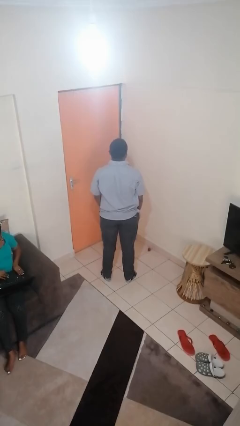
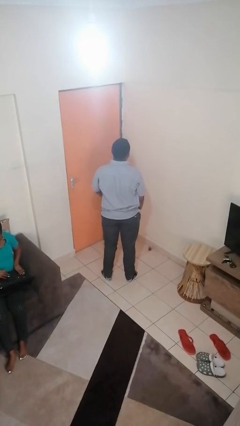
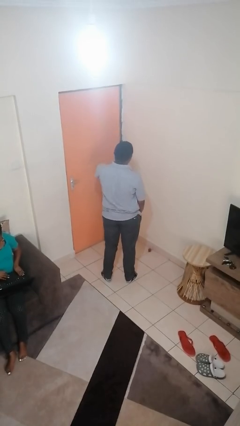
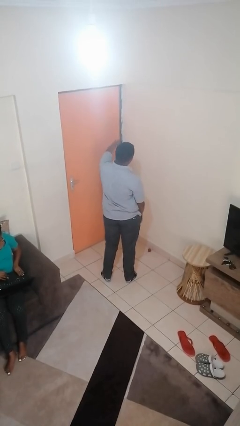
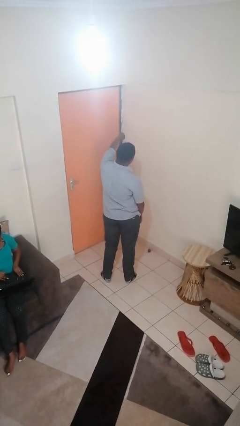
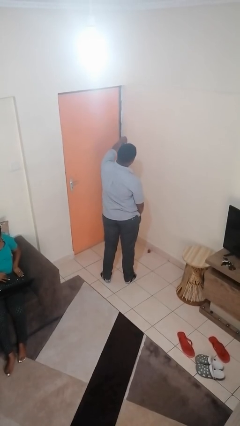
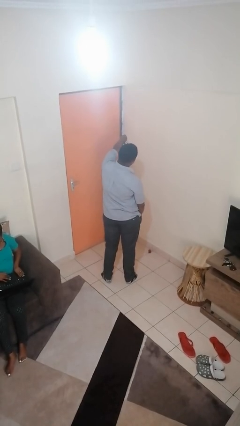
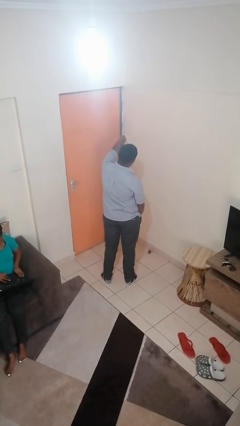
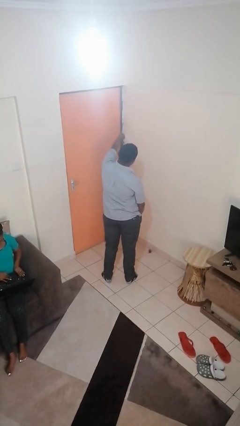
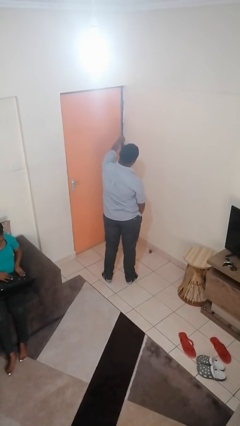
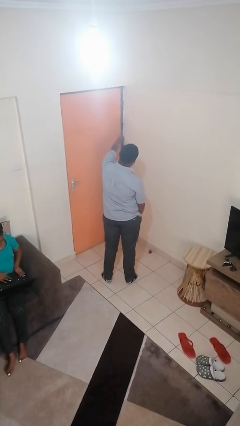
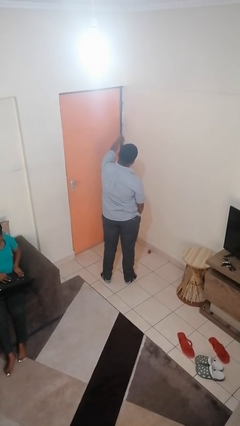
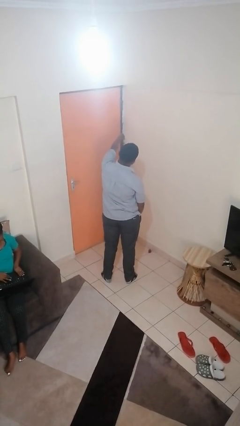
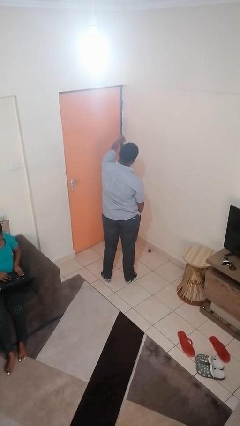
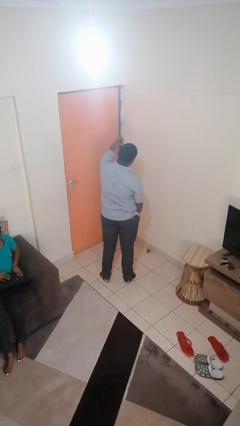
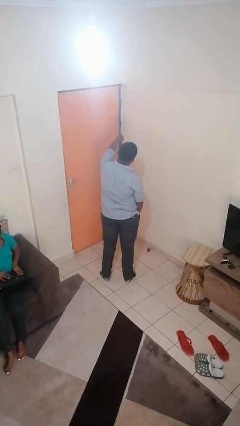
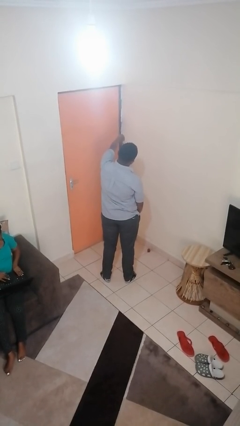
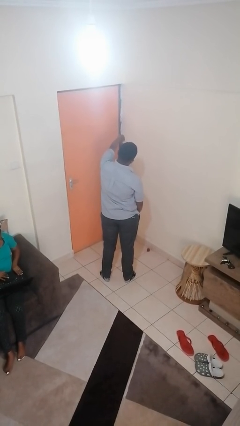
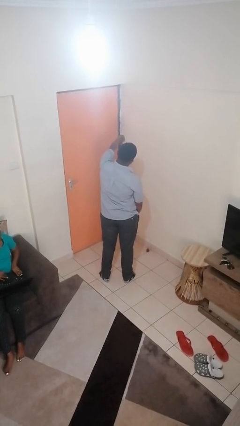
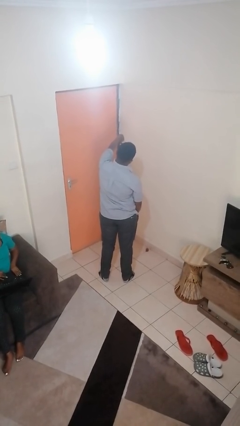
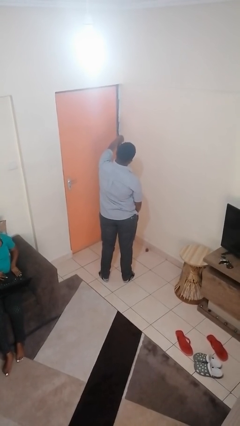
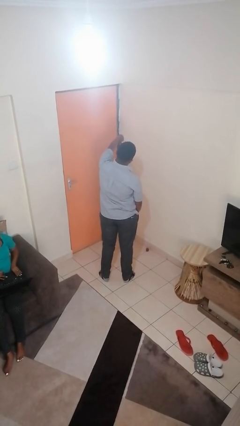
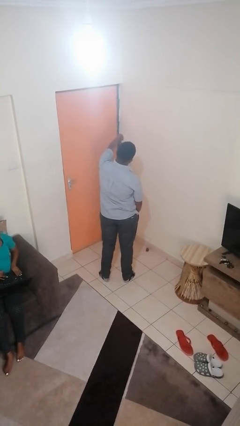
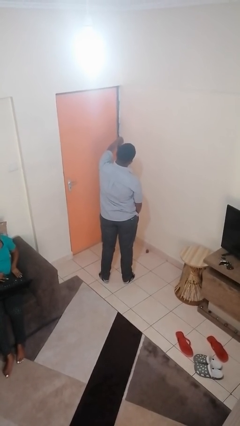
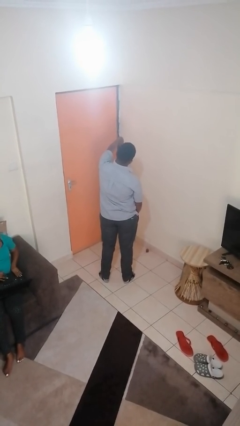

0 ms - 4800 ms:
person gestures thumbs down

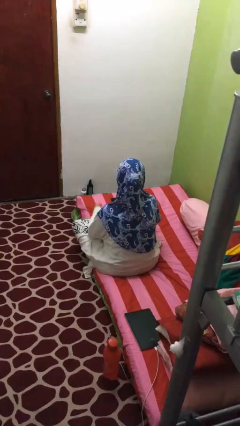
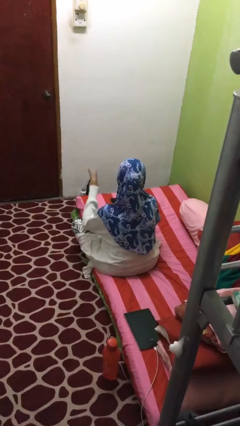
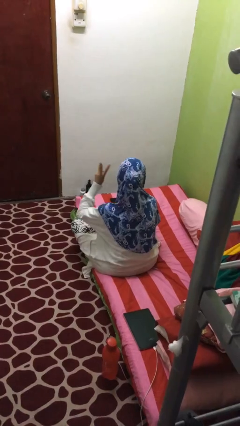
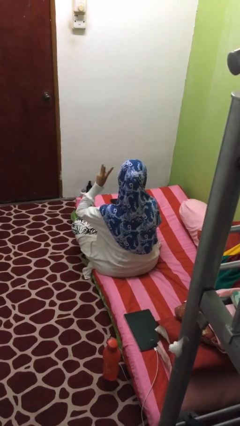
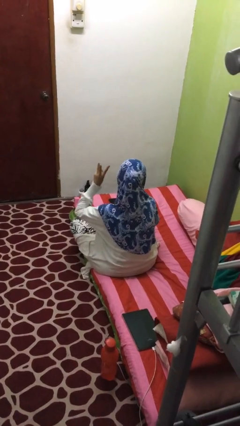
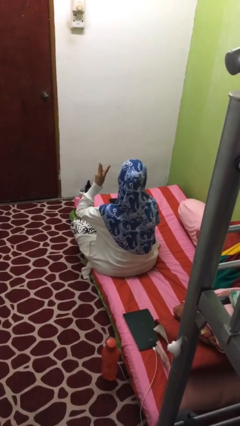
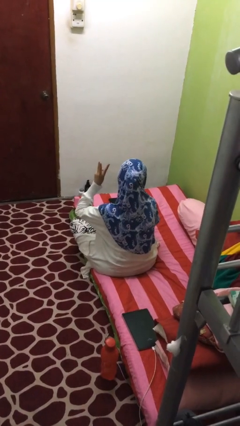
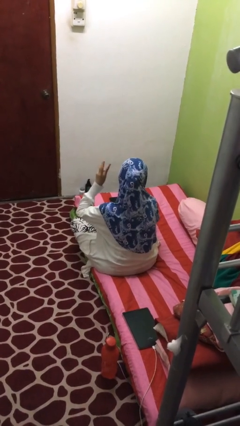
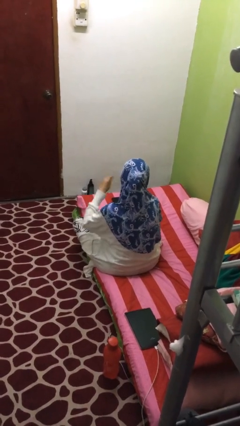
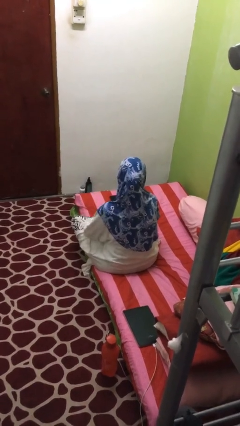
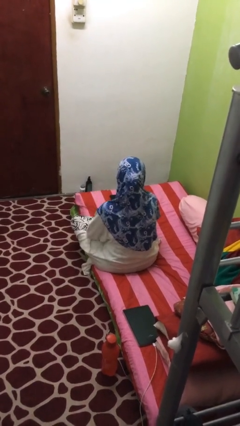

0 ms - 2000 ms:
person gestures number three

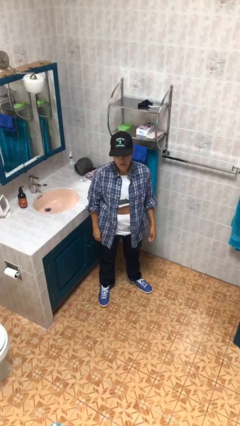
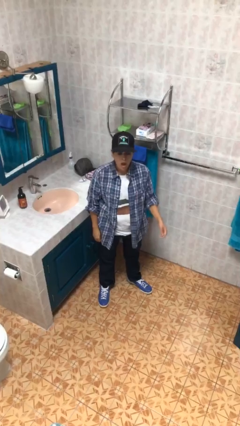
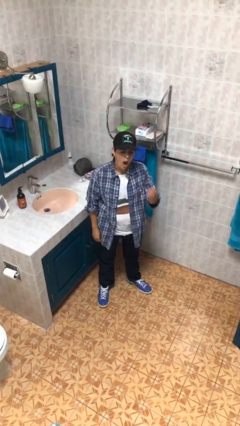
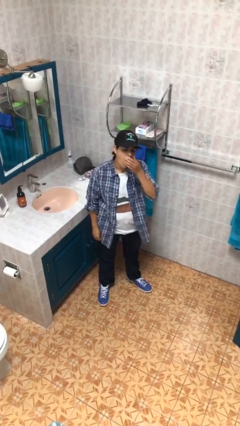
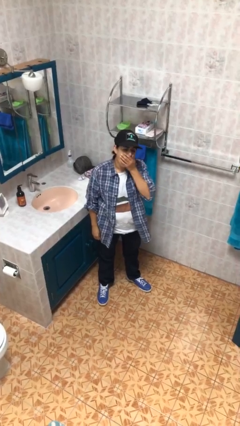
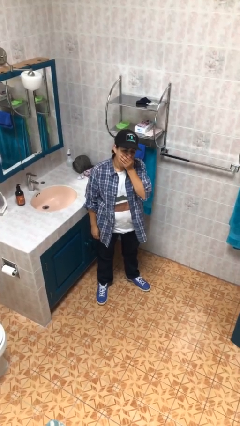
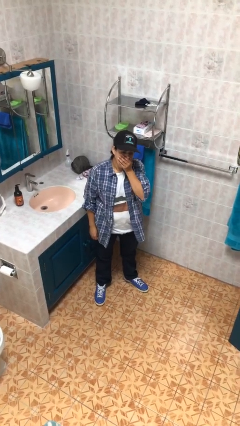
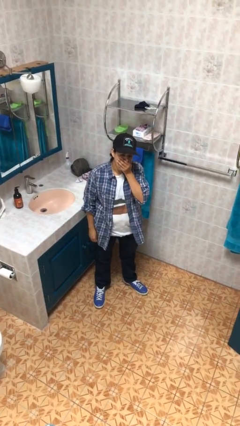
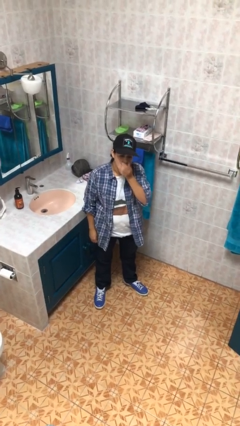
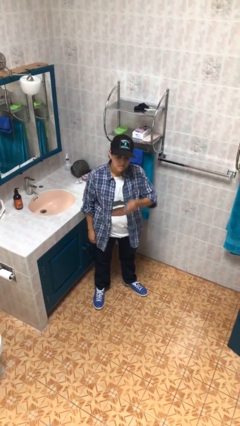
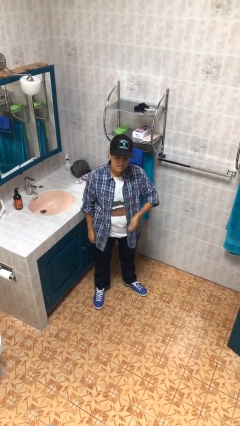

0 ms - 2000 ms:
person yawns

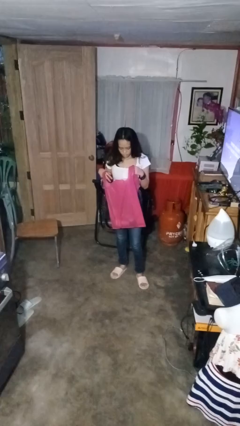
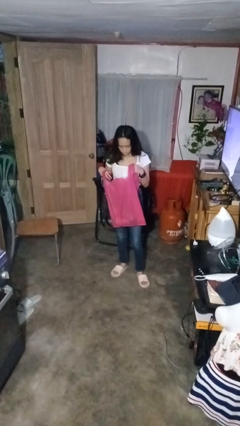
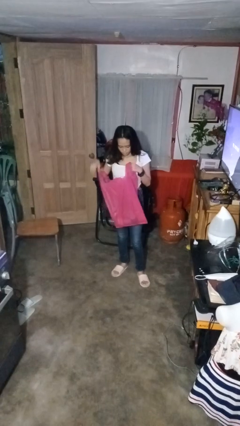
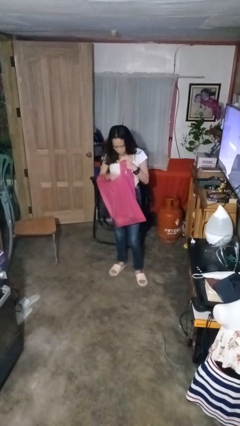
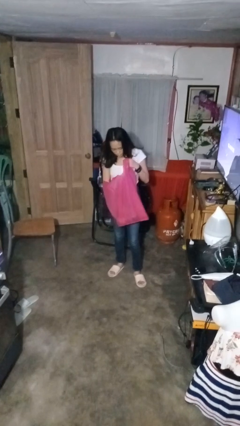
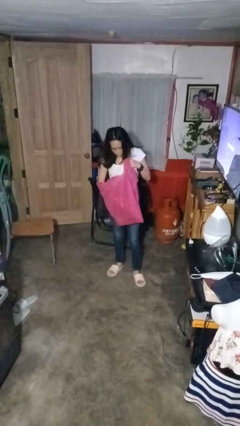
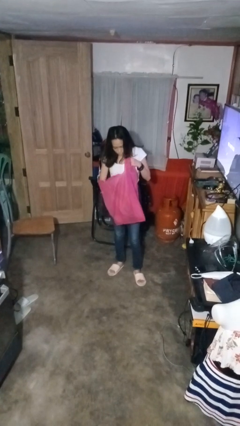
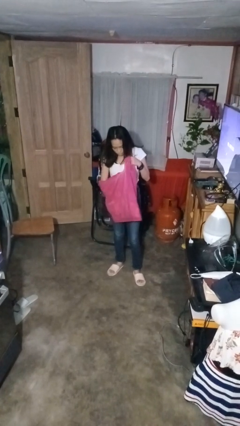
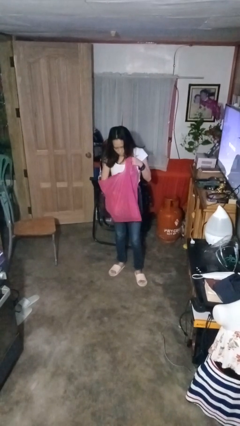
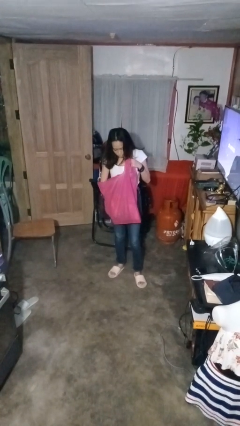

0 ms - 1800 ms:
person searches in bag

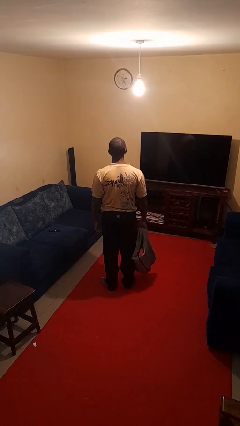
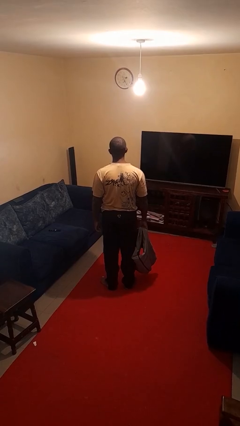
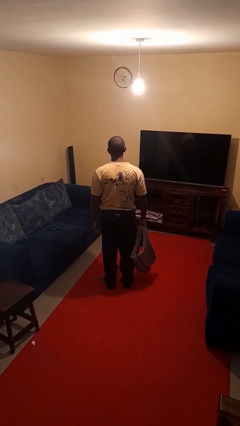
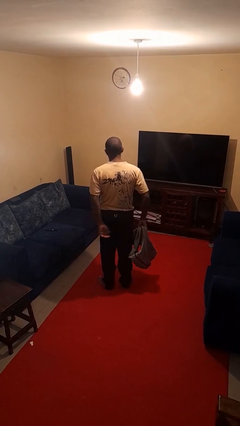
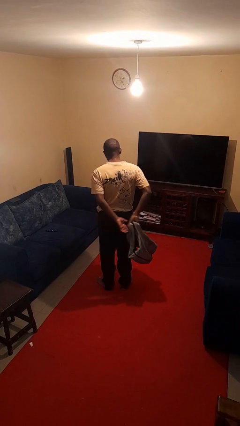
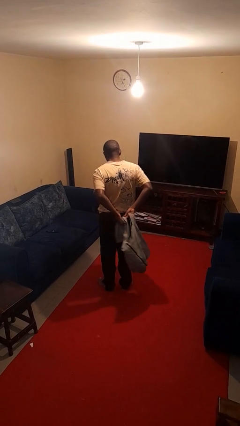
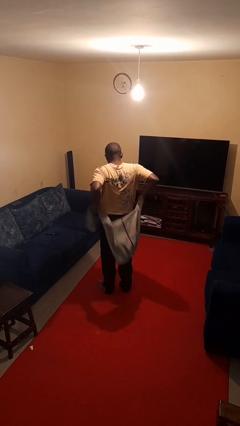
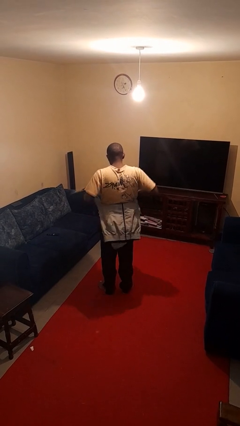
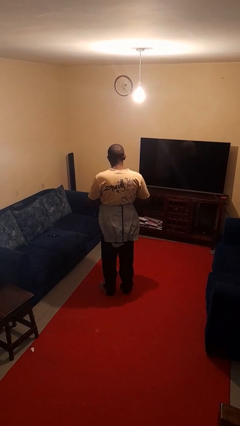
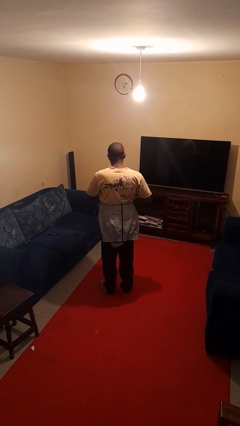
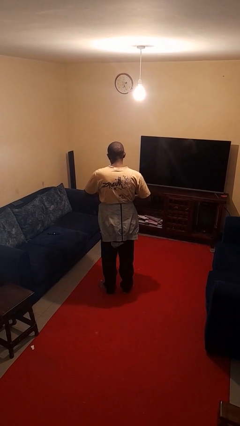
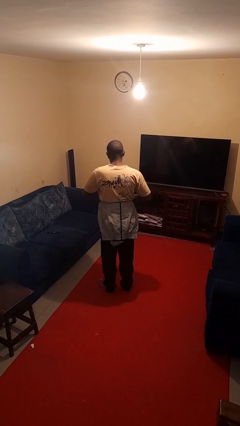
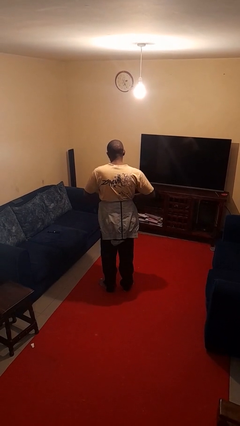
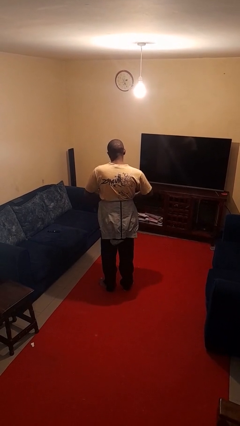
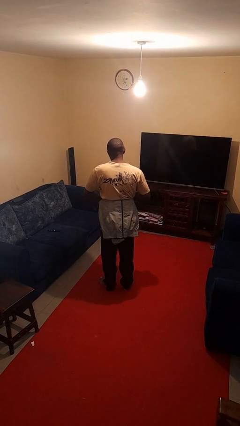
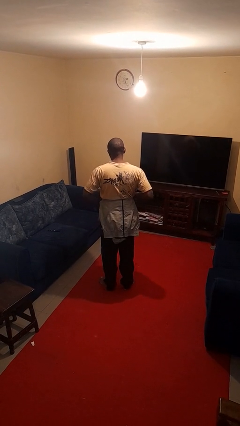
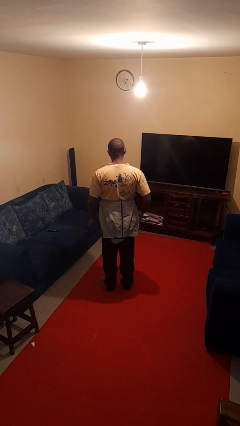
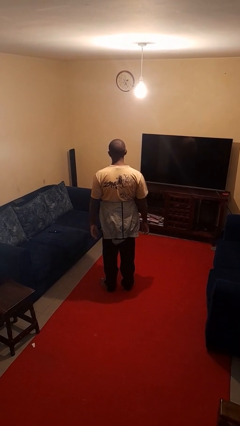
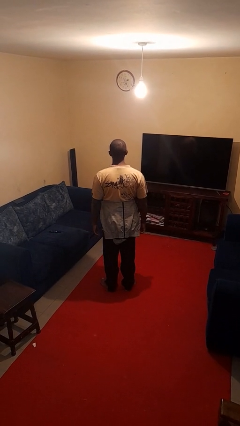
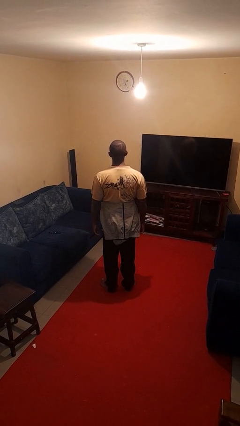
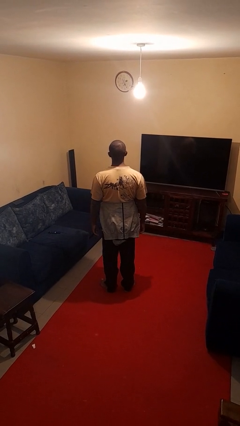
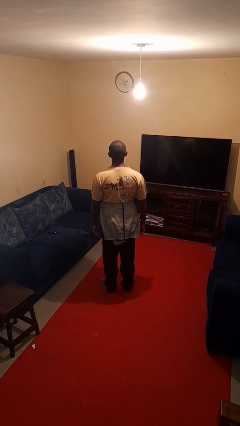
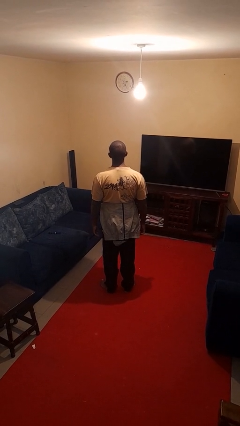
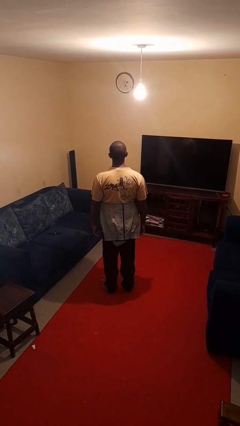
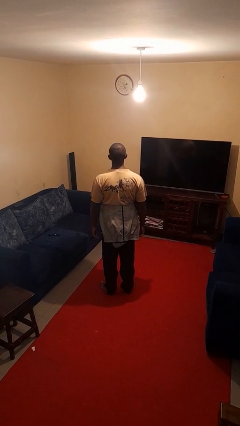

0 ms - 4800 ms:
person ties jacket around waist

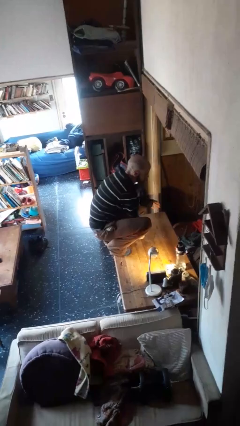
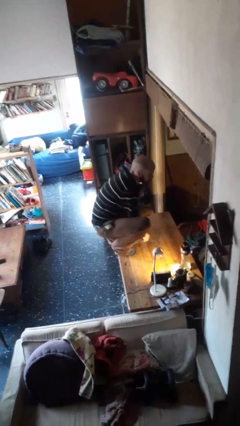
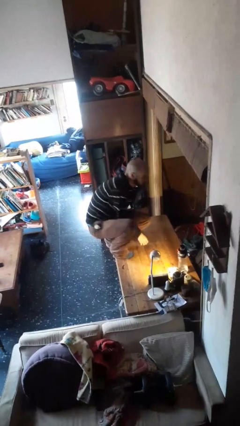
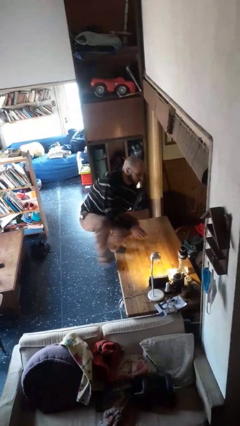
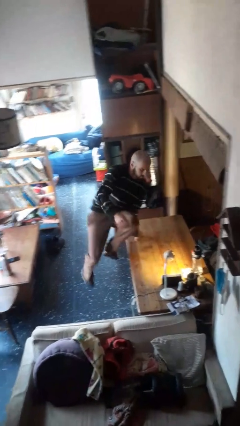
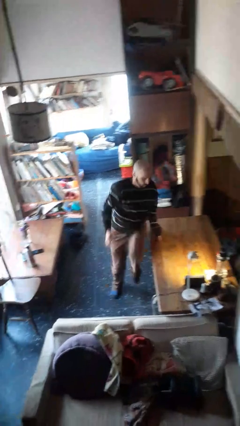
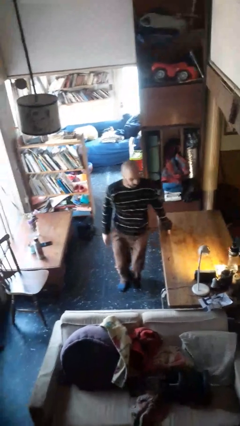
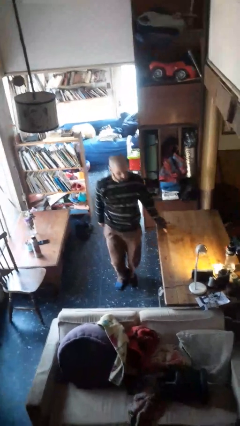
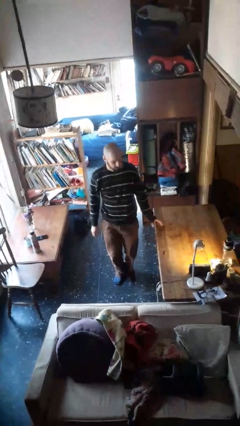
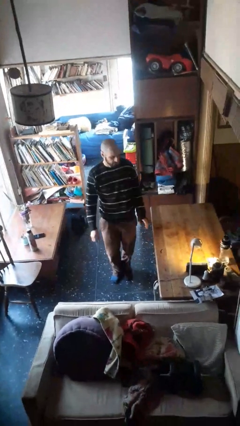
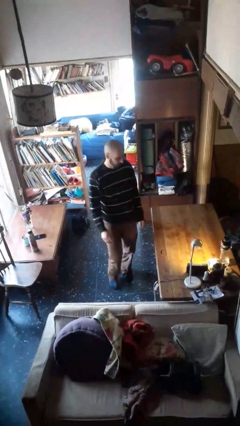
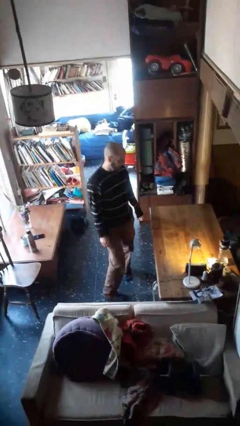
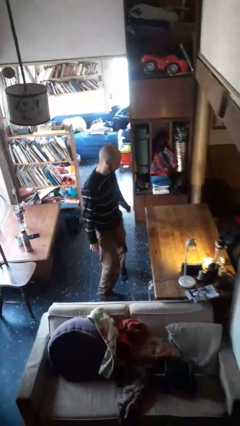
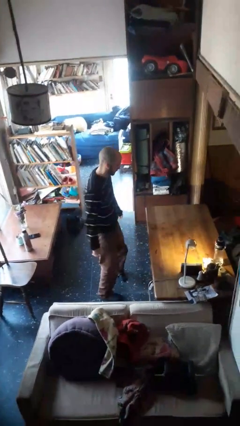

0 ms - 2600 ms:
person climbs off table
